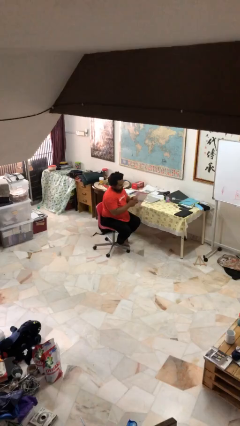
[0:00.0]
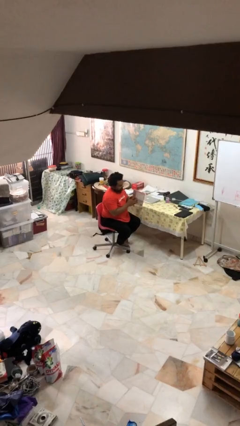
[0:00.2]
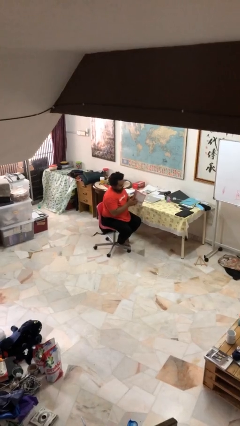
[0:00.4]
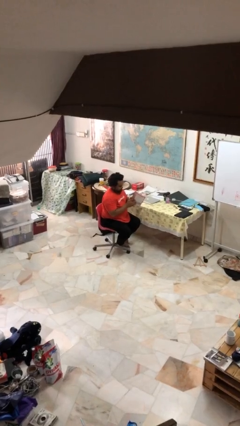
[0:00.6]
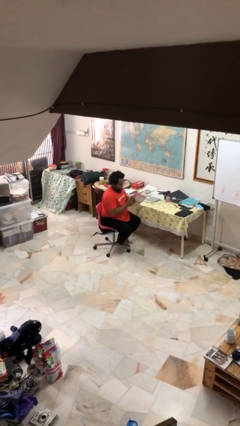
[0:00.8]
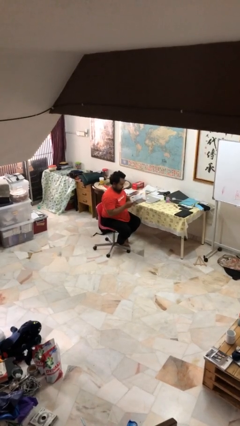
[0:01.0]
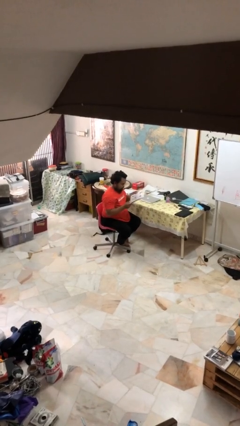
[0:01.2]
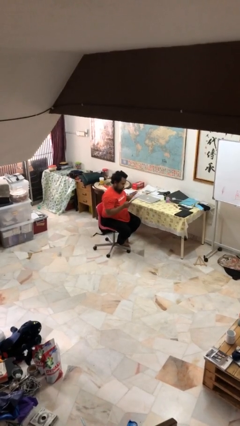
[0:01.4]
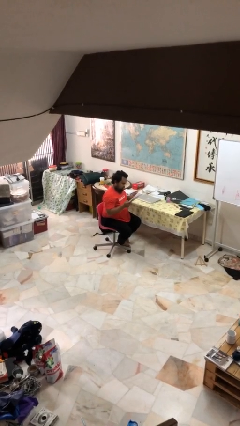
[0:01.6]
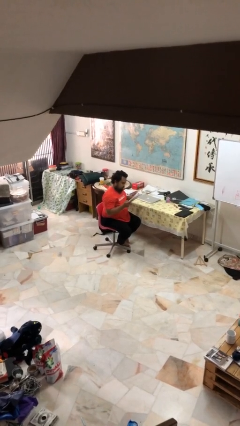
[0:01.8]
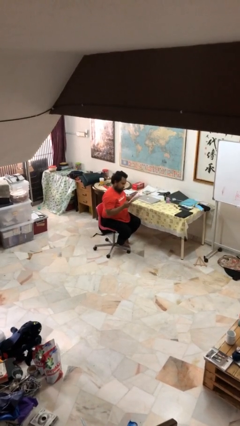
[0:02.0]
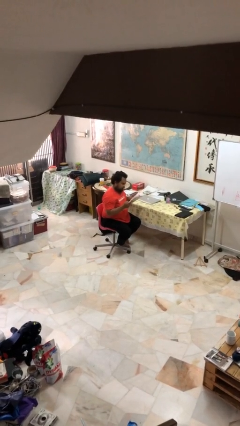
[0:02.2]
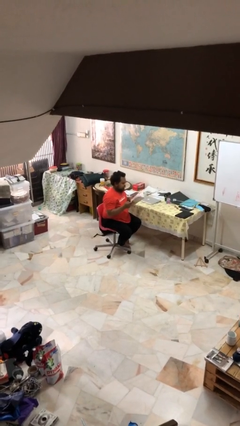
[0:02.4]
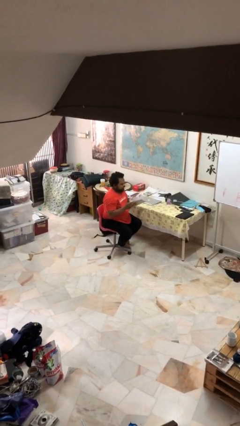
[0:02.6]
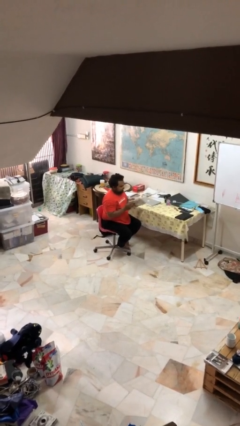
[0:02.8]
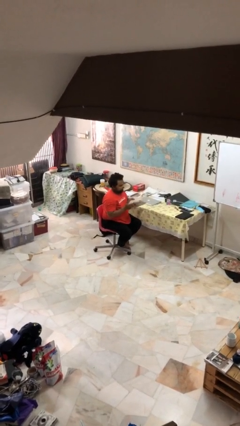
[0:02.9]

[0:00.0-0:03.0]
person reads document

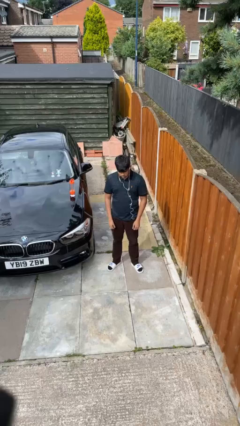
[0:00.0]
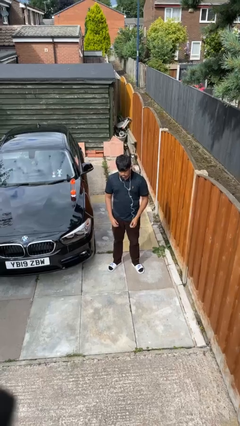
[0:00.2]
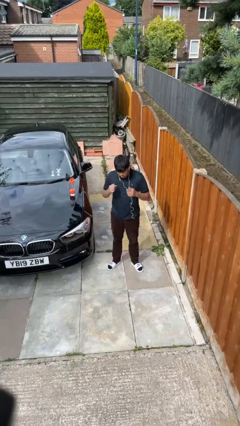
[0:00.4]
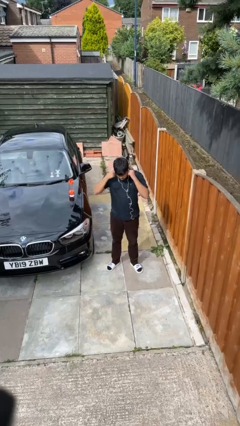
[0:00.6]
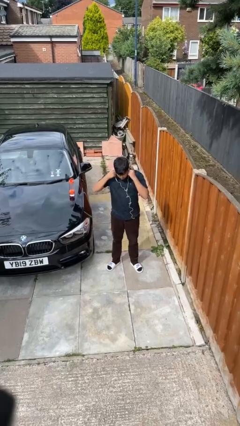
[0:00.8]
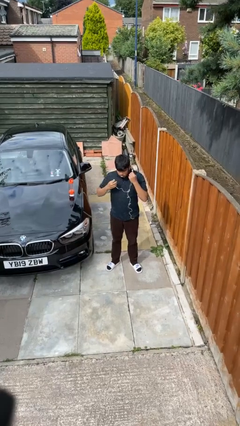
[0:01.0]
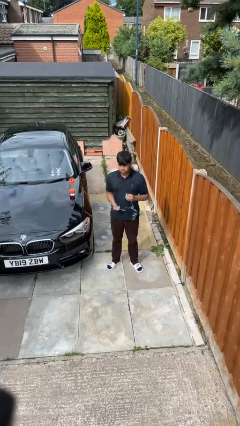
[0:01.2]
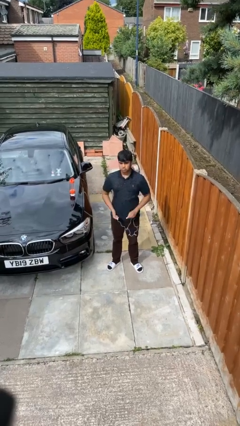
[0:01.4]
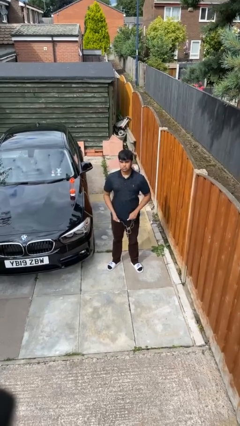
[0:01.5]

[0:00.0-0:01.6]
person takes off headphones

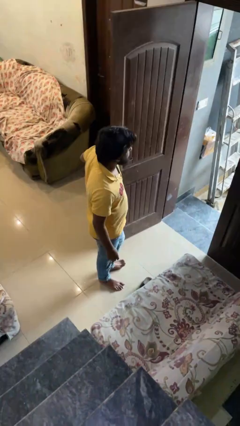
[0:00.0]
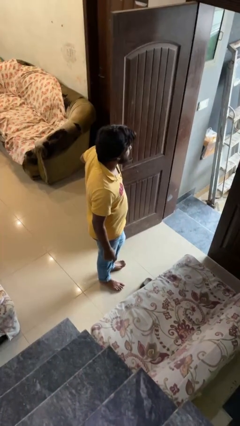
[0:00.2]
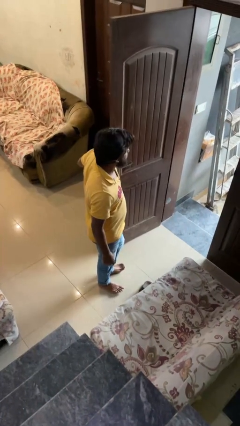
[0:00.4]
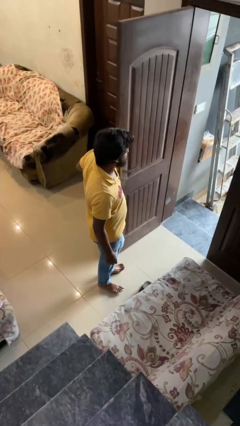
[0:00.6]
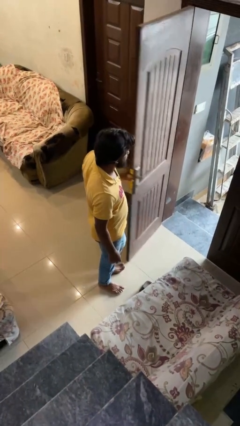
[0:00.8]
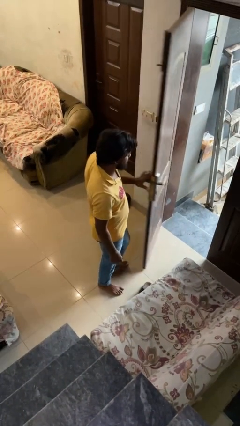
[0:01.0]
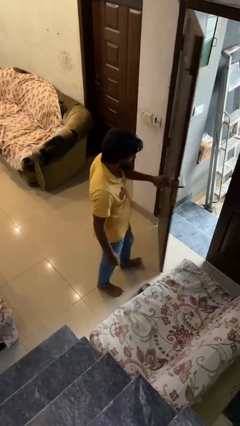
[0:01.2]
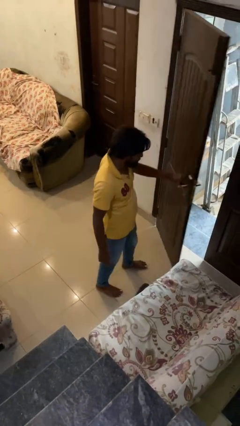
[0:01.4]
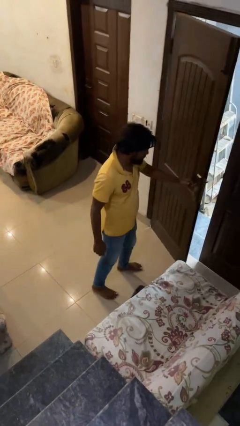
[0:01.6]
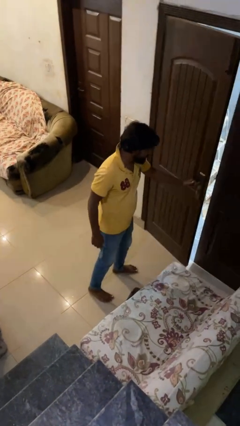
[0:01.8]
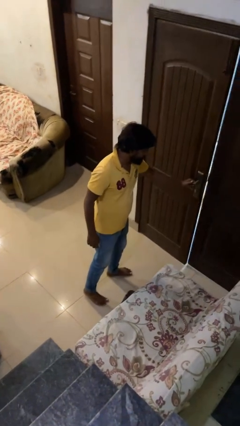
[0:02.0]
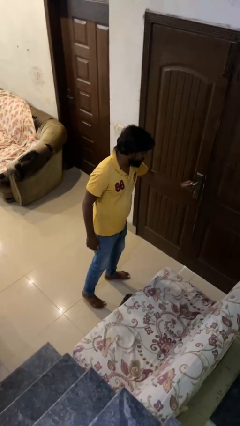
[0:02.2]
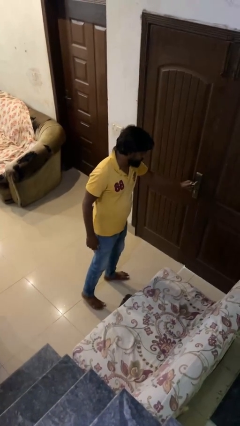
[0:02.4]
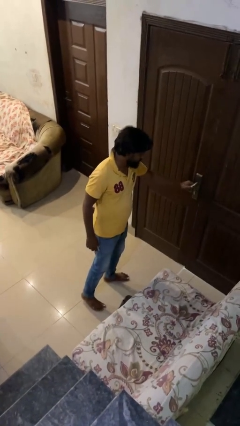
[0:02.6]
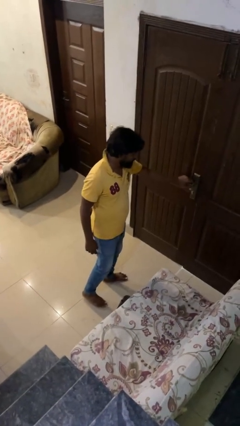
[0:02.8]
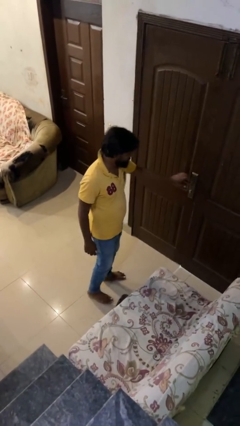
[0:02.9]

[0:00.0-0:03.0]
person closes facility door

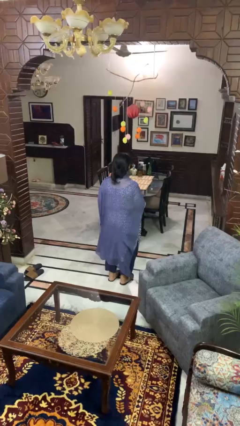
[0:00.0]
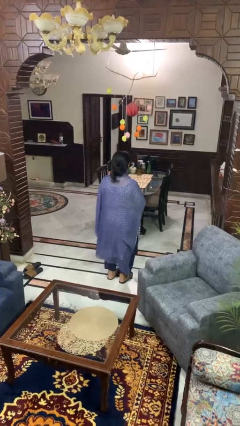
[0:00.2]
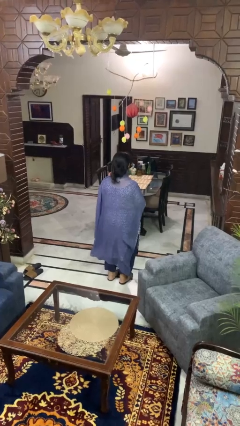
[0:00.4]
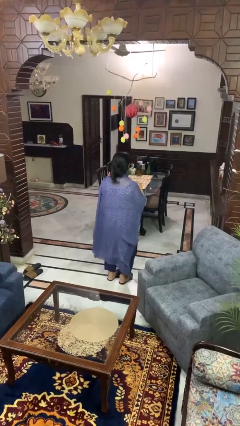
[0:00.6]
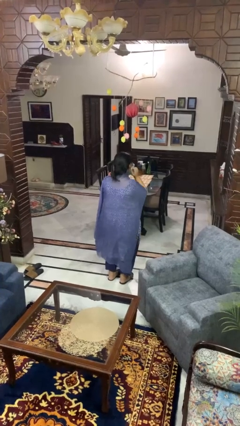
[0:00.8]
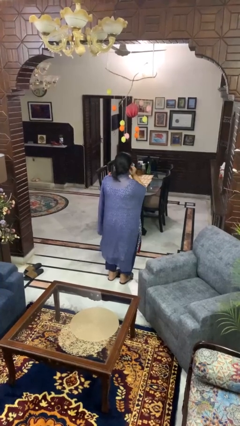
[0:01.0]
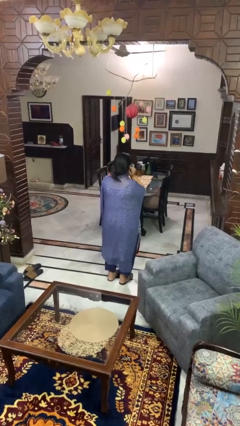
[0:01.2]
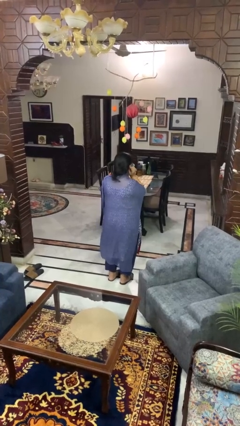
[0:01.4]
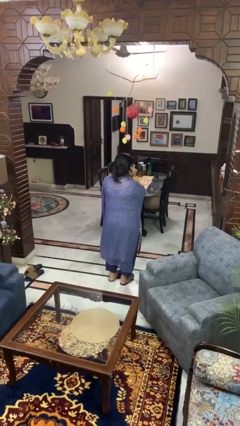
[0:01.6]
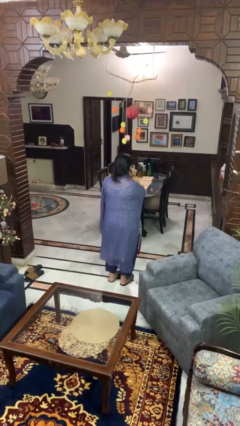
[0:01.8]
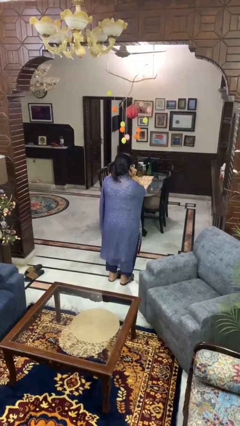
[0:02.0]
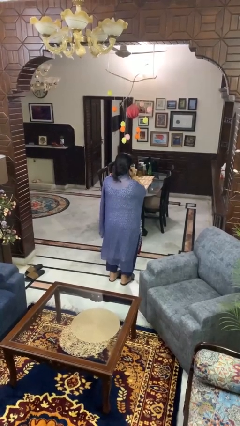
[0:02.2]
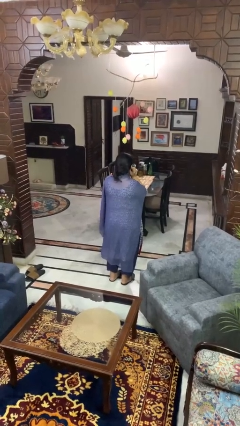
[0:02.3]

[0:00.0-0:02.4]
person puts fingers in ear

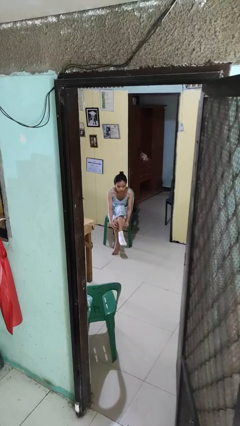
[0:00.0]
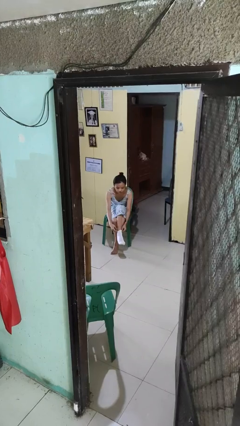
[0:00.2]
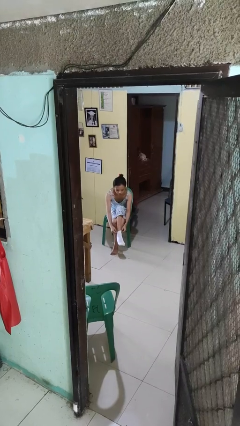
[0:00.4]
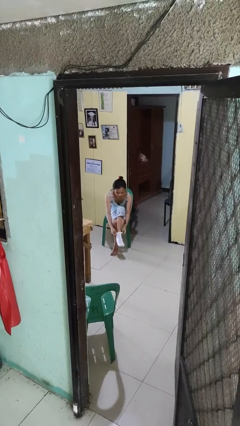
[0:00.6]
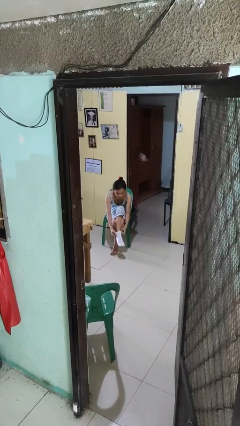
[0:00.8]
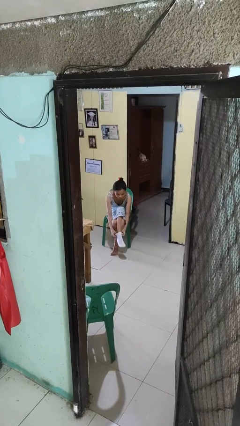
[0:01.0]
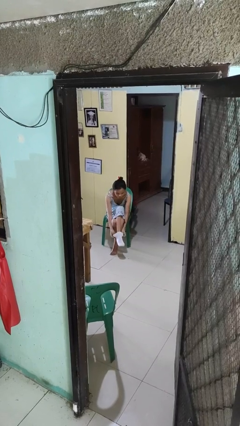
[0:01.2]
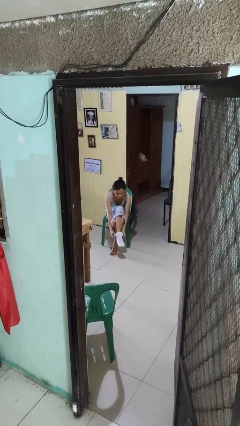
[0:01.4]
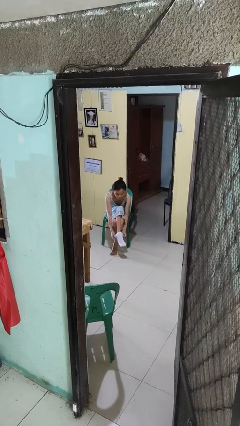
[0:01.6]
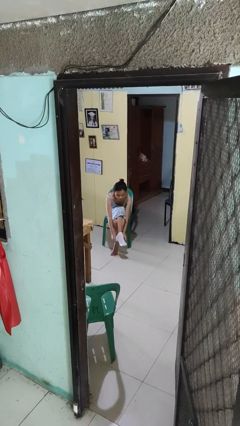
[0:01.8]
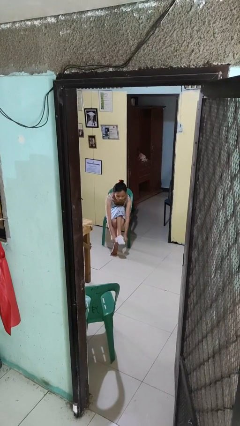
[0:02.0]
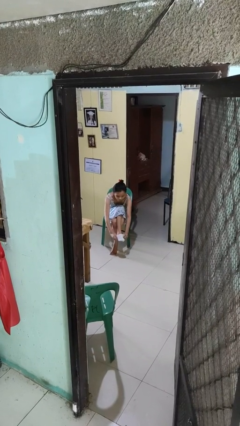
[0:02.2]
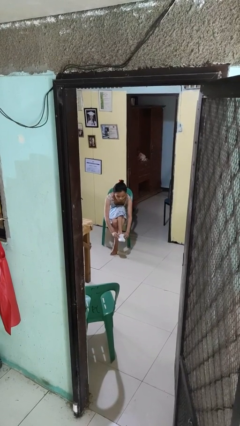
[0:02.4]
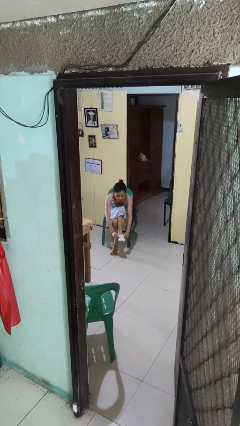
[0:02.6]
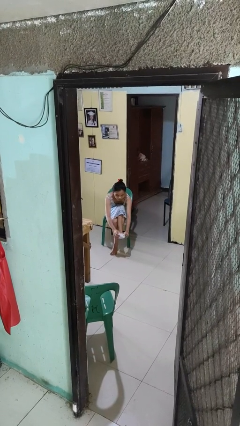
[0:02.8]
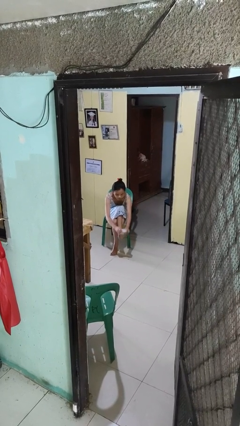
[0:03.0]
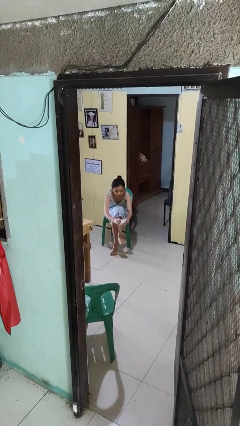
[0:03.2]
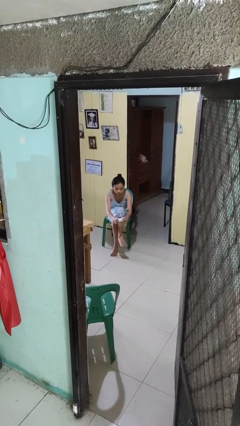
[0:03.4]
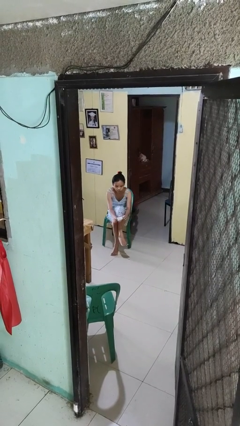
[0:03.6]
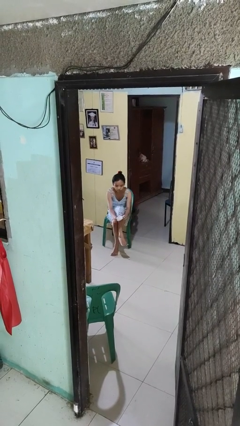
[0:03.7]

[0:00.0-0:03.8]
person takes off socks

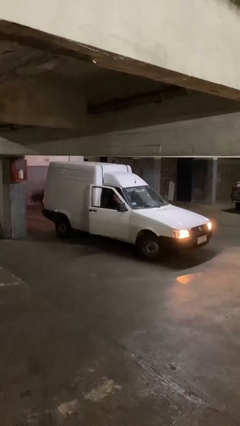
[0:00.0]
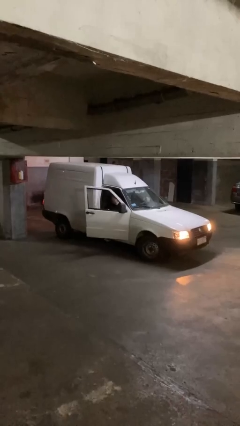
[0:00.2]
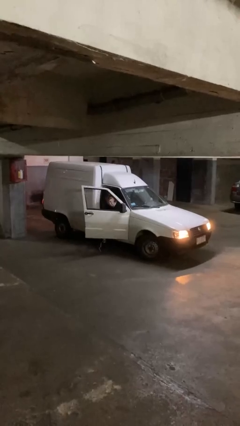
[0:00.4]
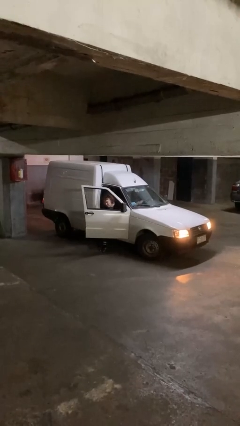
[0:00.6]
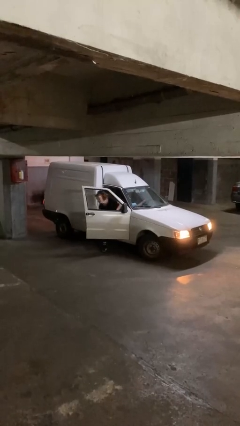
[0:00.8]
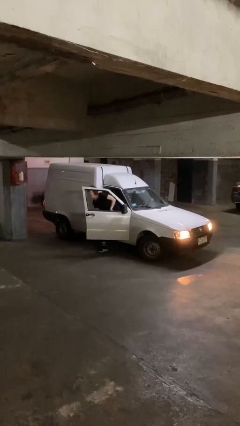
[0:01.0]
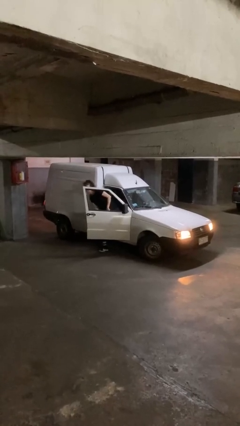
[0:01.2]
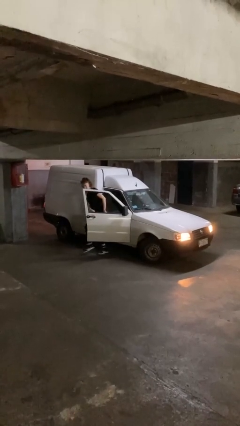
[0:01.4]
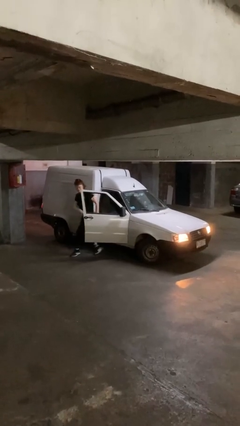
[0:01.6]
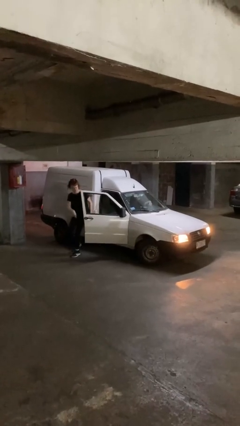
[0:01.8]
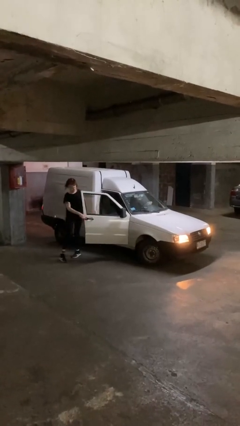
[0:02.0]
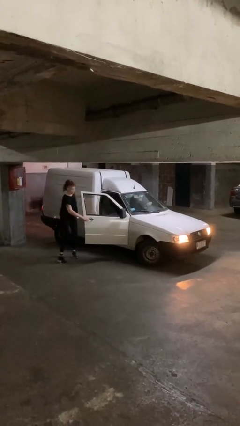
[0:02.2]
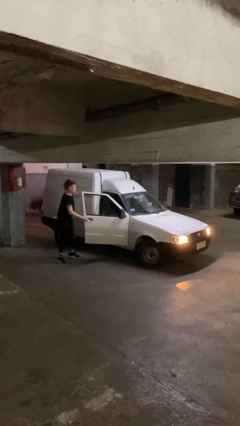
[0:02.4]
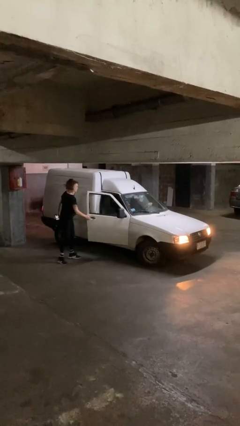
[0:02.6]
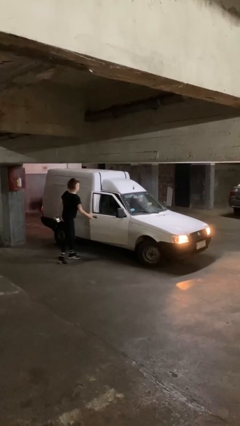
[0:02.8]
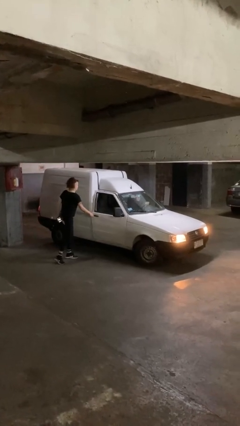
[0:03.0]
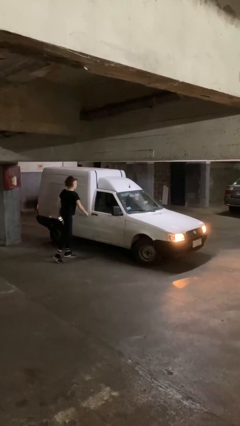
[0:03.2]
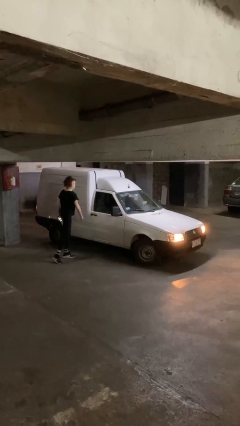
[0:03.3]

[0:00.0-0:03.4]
car drops off person
